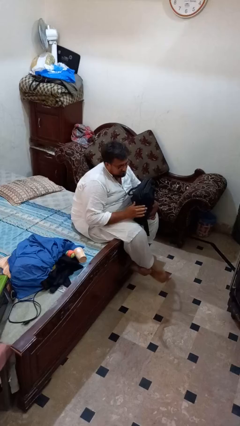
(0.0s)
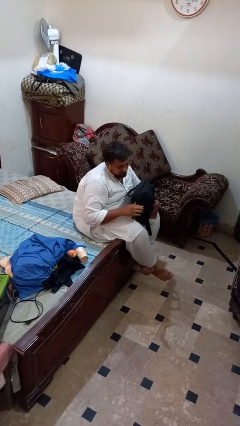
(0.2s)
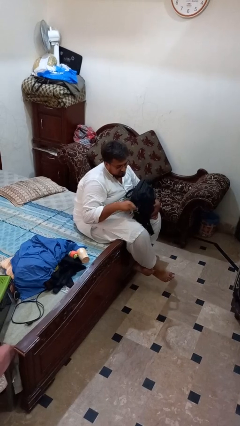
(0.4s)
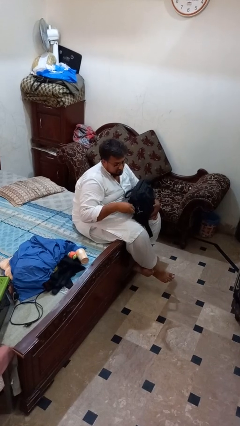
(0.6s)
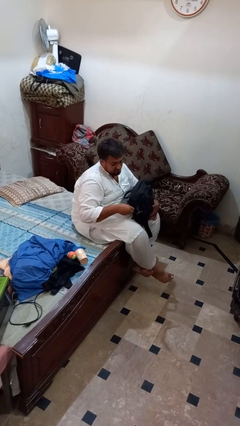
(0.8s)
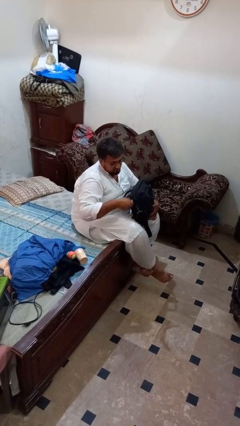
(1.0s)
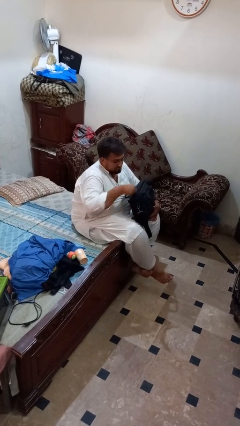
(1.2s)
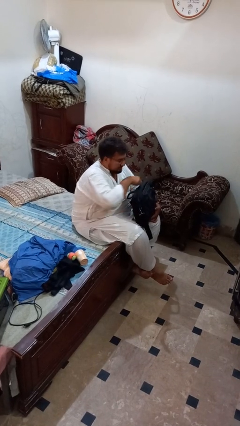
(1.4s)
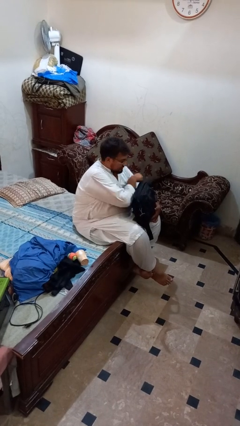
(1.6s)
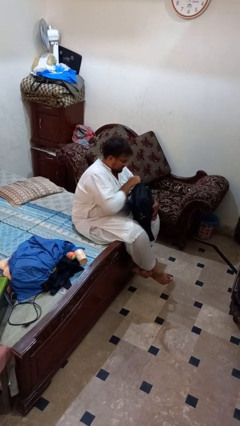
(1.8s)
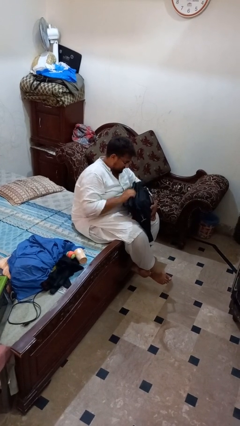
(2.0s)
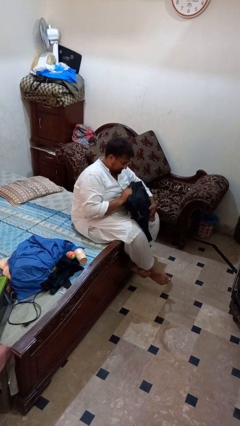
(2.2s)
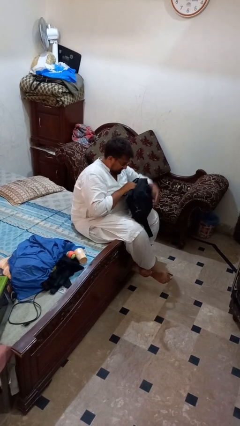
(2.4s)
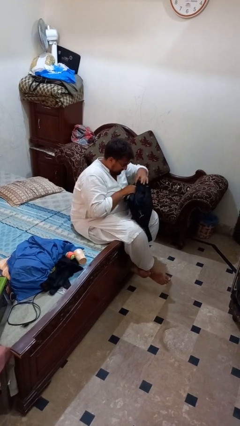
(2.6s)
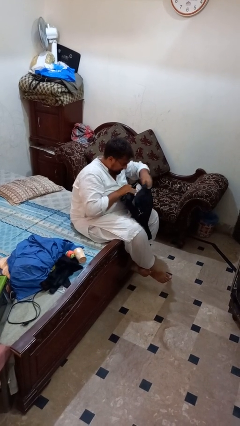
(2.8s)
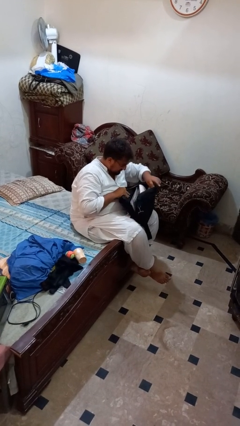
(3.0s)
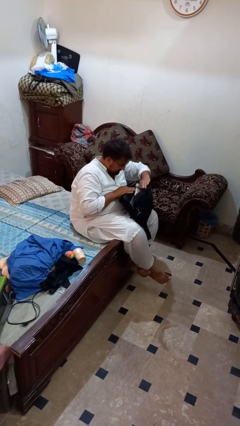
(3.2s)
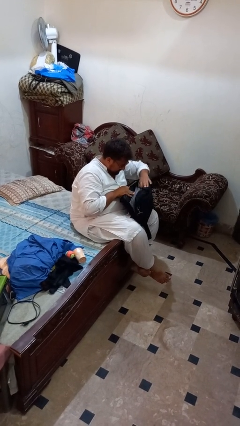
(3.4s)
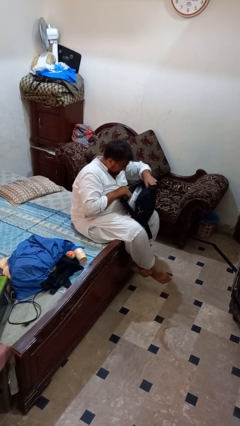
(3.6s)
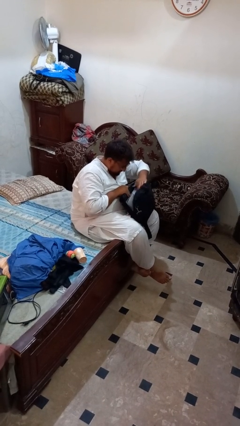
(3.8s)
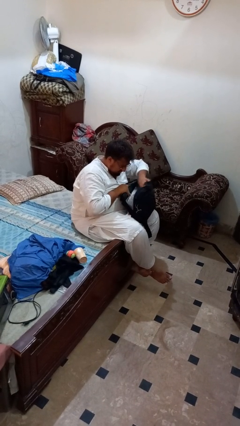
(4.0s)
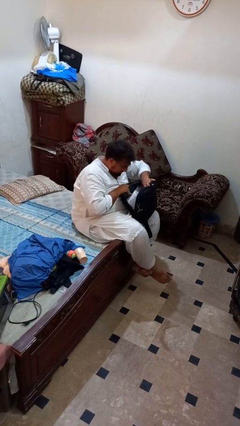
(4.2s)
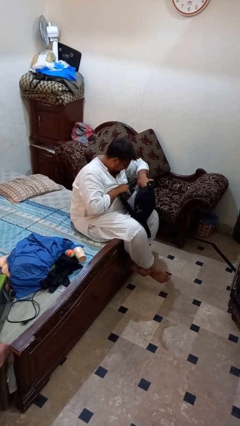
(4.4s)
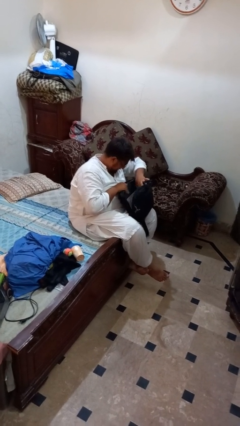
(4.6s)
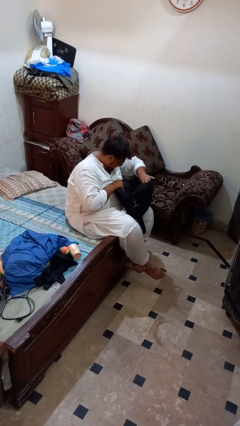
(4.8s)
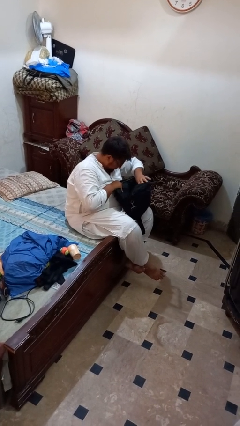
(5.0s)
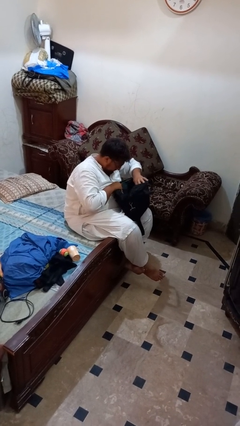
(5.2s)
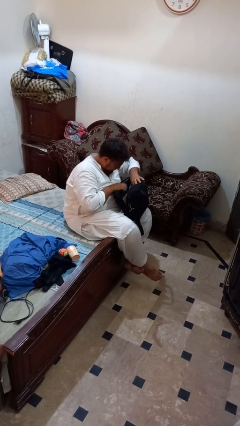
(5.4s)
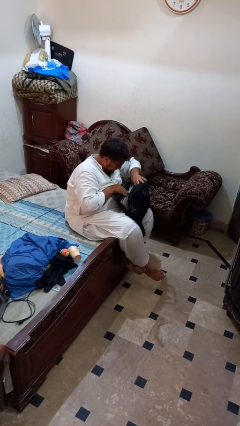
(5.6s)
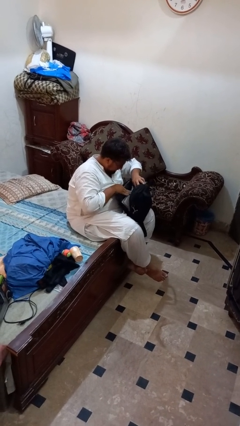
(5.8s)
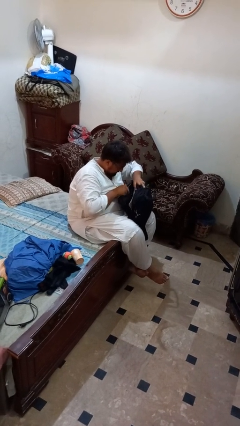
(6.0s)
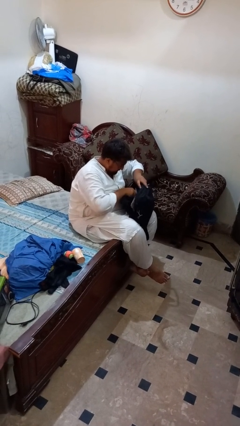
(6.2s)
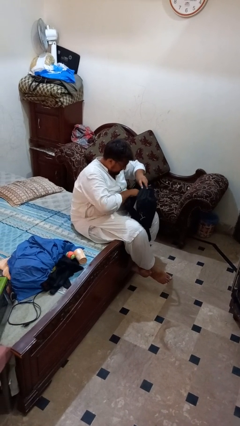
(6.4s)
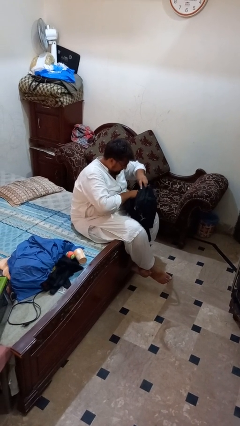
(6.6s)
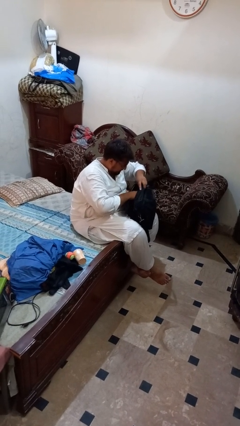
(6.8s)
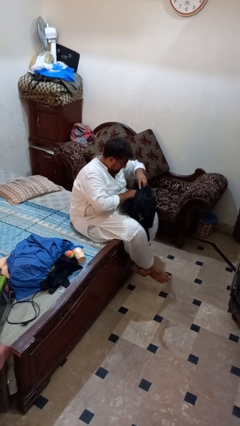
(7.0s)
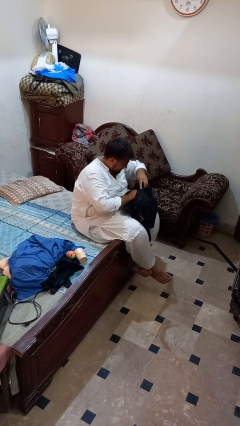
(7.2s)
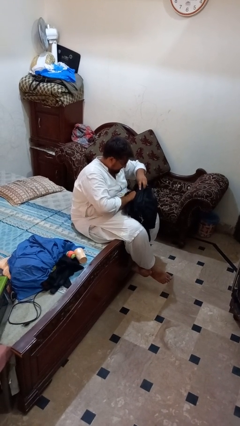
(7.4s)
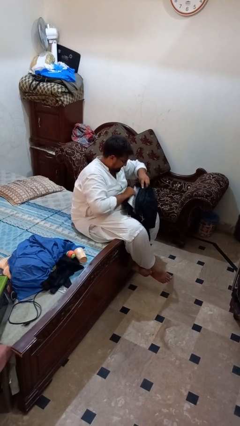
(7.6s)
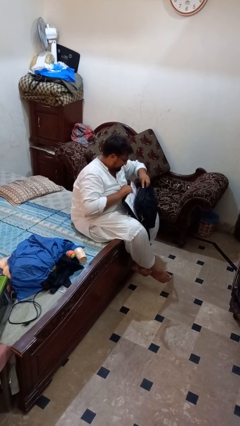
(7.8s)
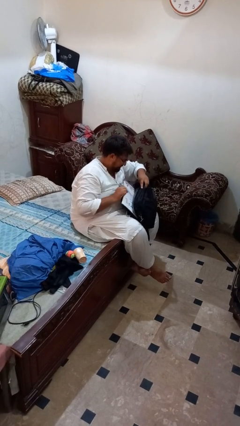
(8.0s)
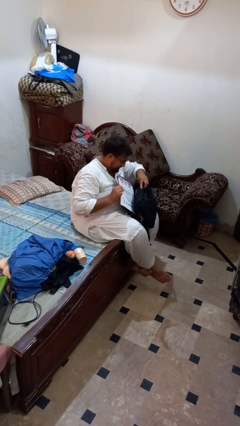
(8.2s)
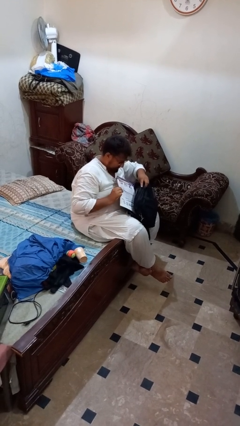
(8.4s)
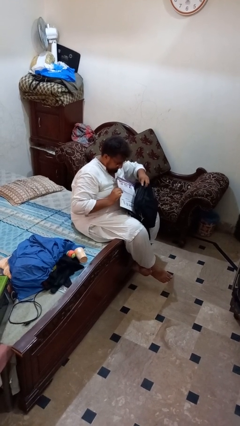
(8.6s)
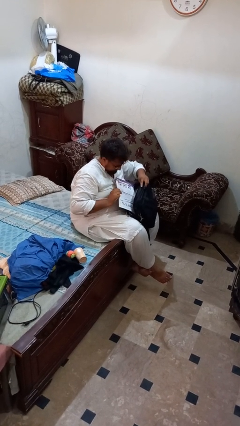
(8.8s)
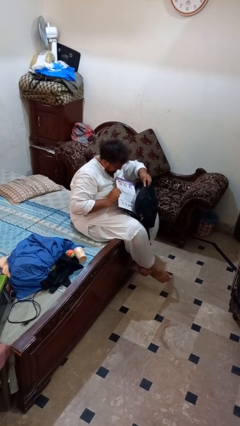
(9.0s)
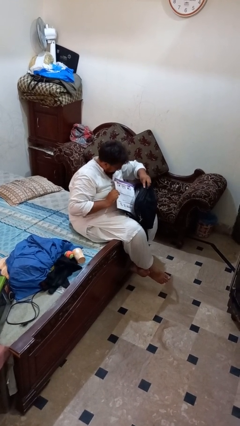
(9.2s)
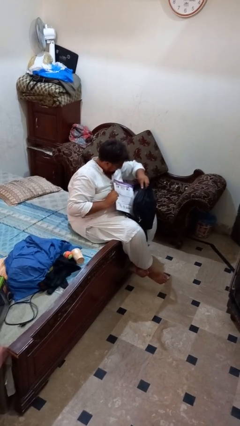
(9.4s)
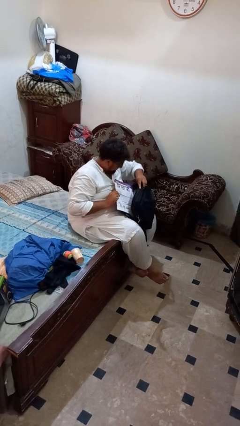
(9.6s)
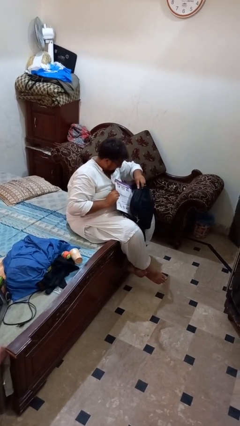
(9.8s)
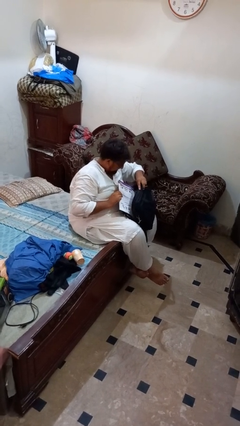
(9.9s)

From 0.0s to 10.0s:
person searches in bag

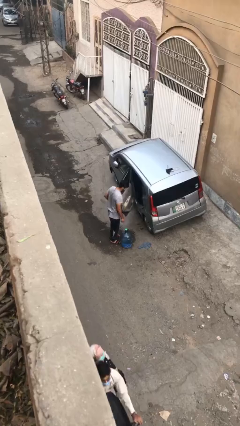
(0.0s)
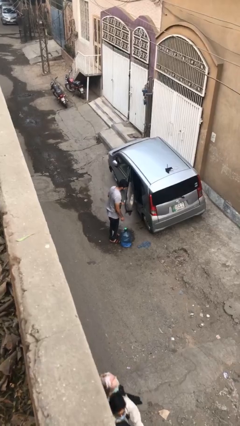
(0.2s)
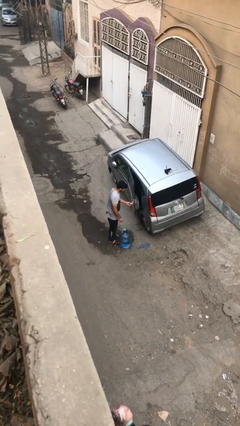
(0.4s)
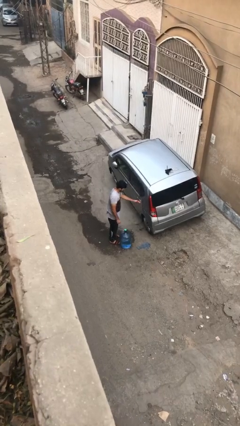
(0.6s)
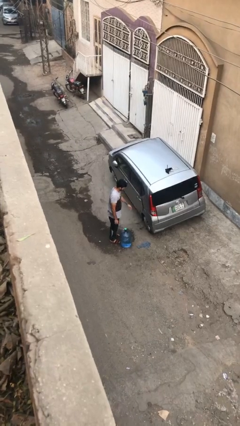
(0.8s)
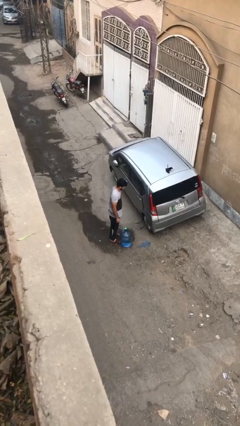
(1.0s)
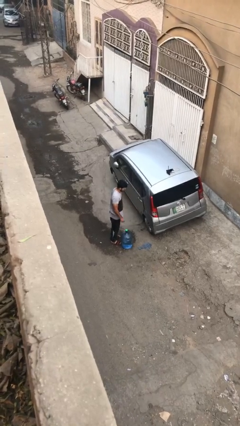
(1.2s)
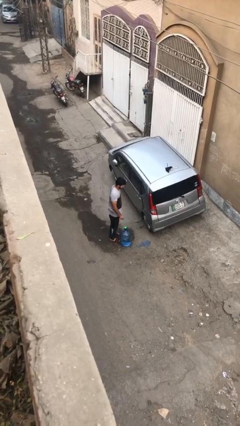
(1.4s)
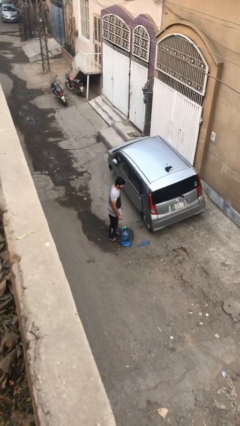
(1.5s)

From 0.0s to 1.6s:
person closes car door

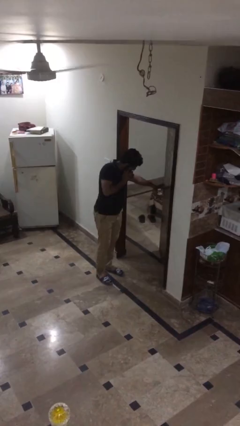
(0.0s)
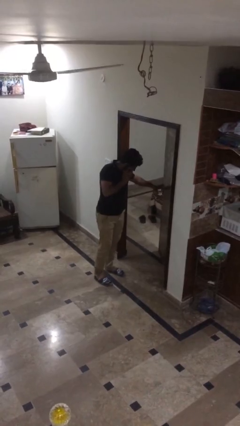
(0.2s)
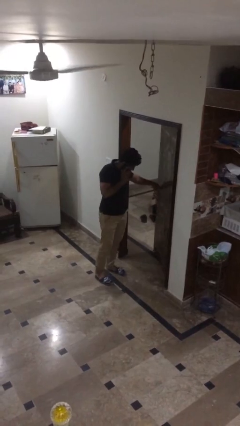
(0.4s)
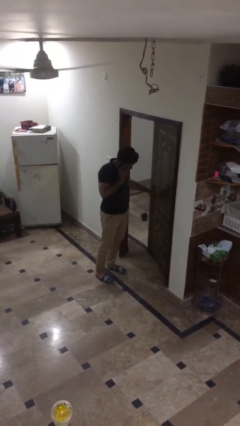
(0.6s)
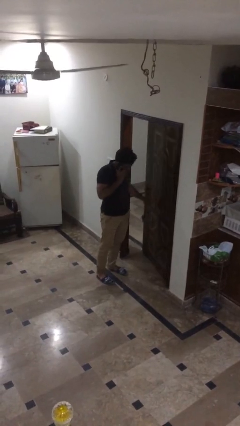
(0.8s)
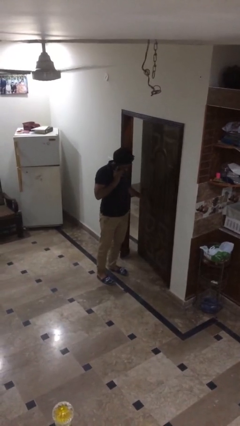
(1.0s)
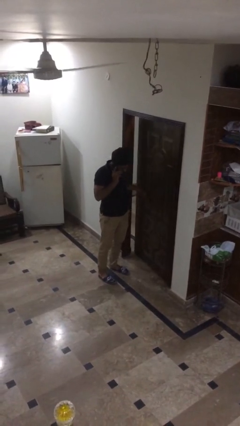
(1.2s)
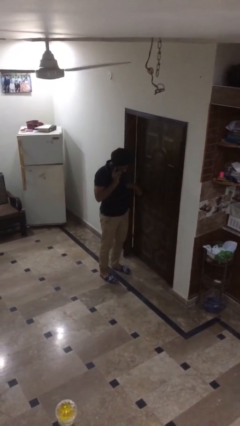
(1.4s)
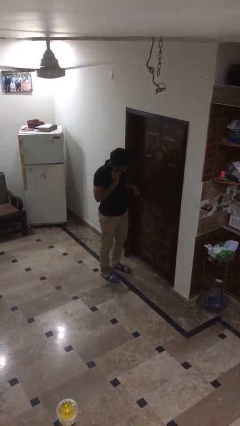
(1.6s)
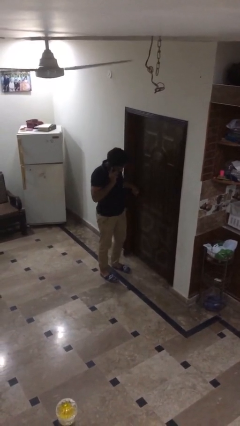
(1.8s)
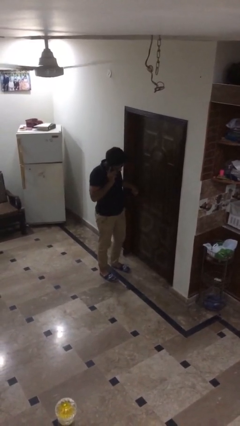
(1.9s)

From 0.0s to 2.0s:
person closes facility door

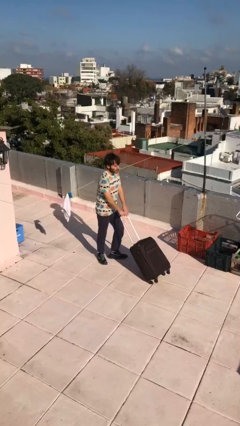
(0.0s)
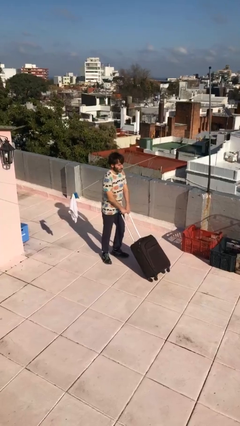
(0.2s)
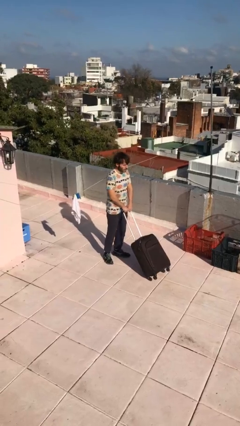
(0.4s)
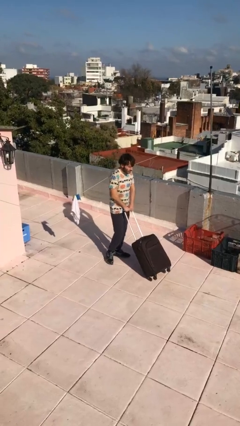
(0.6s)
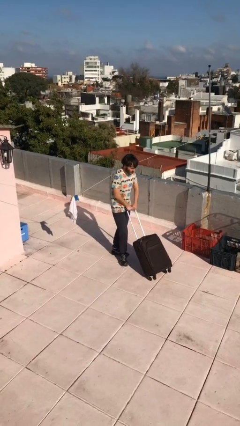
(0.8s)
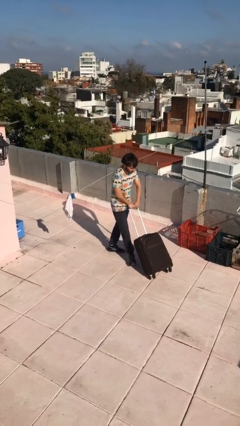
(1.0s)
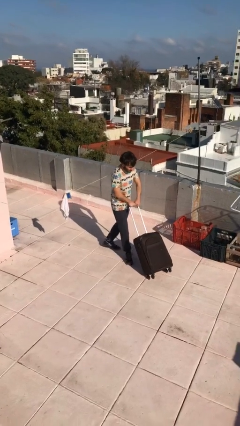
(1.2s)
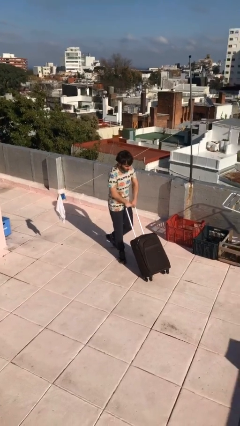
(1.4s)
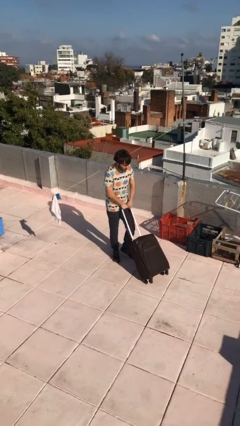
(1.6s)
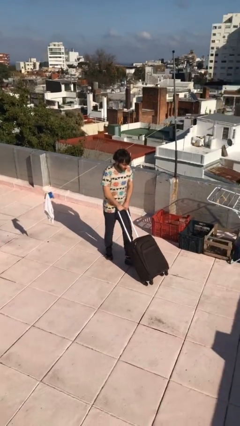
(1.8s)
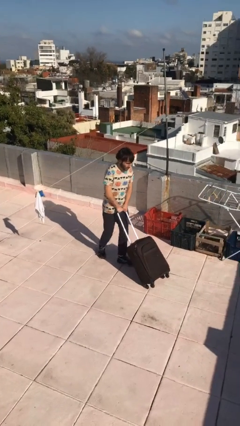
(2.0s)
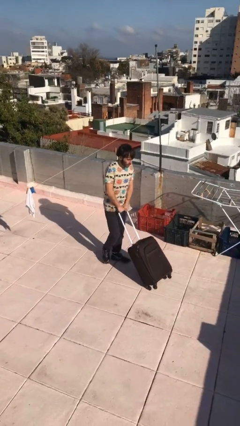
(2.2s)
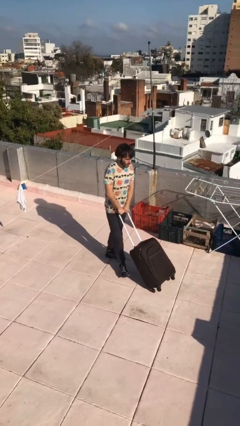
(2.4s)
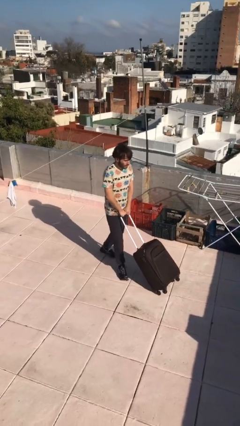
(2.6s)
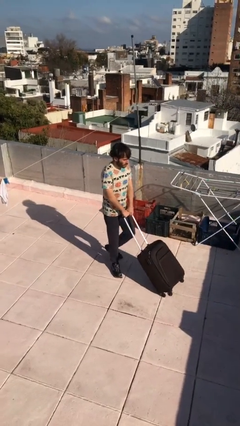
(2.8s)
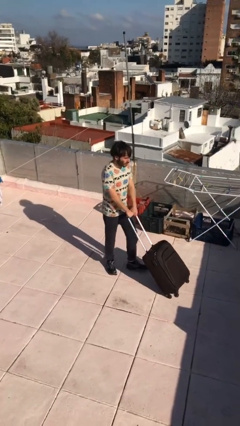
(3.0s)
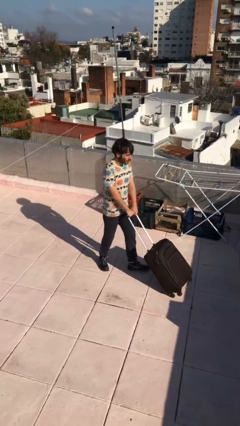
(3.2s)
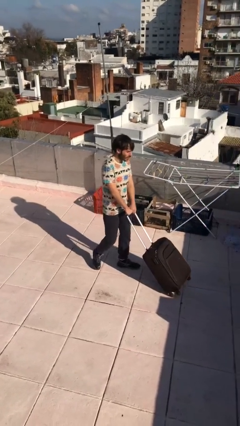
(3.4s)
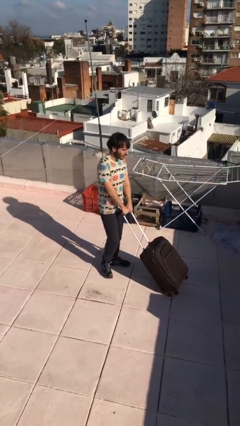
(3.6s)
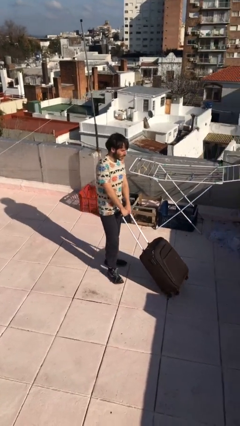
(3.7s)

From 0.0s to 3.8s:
person pushes wheeled cart

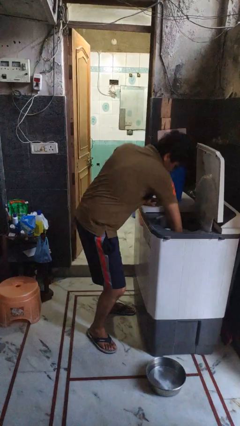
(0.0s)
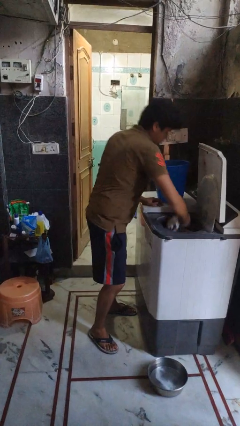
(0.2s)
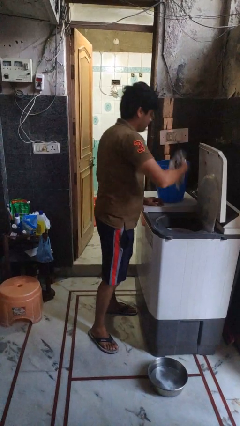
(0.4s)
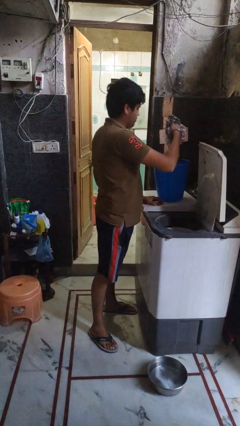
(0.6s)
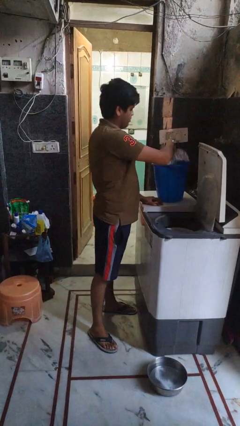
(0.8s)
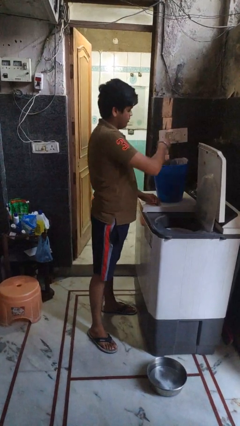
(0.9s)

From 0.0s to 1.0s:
person unloads dryer
